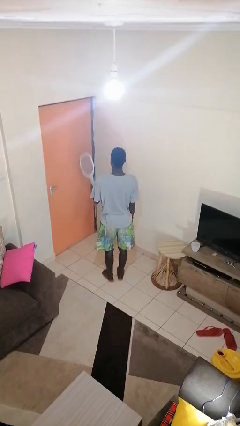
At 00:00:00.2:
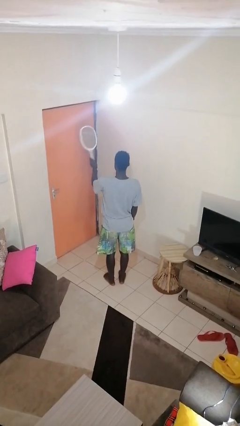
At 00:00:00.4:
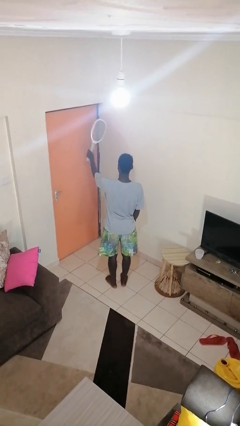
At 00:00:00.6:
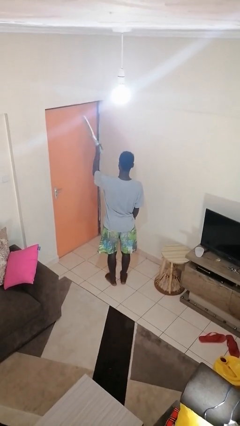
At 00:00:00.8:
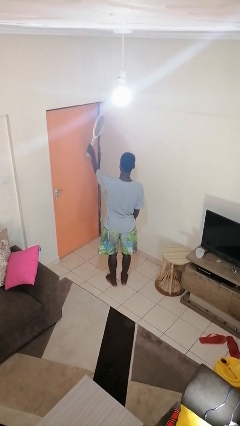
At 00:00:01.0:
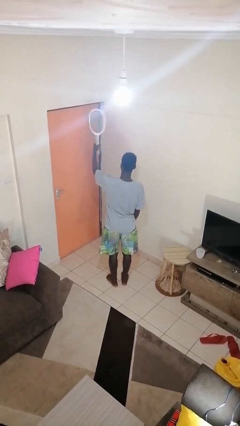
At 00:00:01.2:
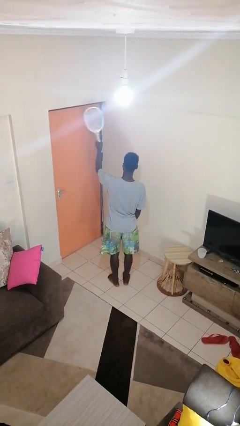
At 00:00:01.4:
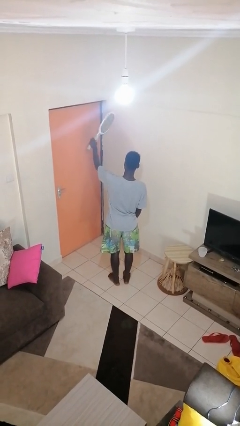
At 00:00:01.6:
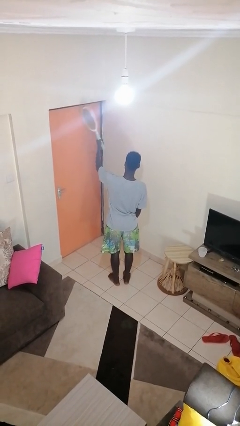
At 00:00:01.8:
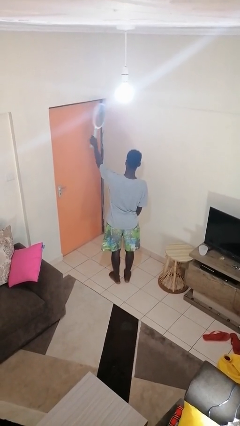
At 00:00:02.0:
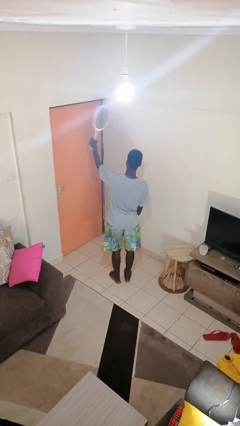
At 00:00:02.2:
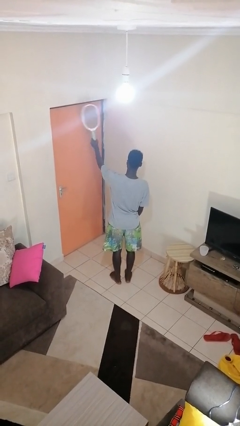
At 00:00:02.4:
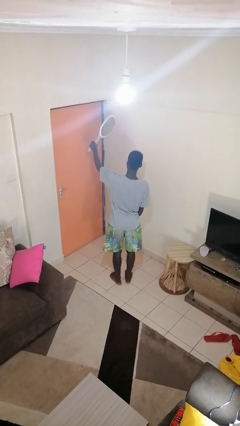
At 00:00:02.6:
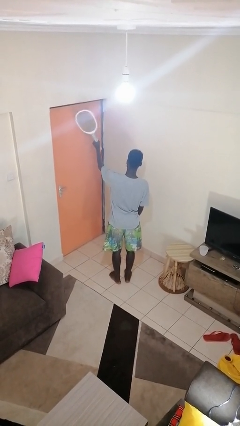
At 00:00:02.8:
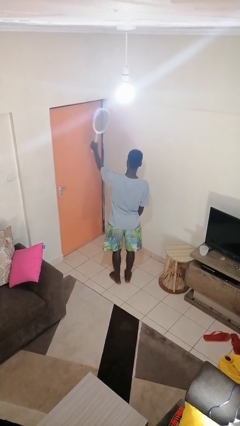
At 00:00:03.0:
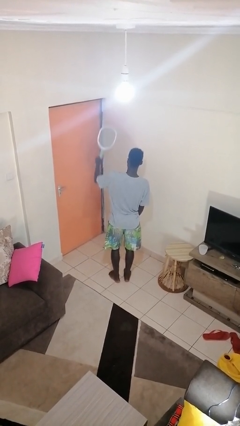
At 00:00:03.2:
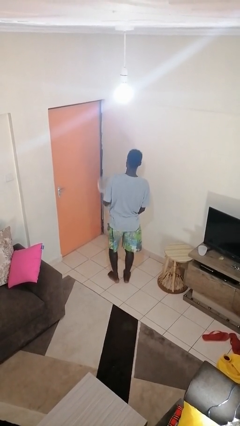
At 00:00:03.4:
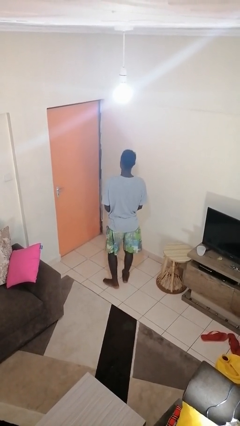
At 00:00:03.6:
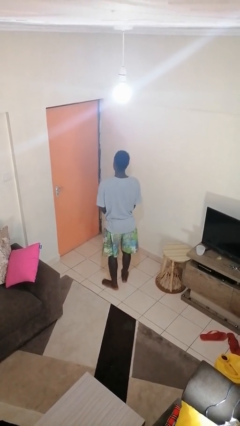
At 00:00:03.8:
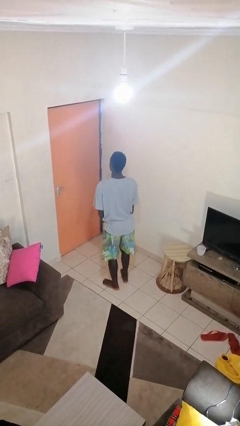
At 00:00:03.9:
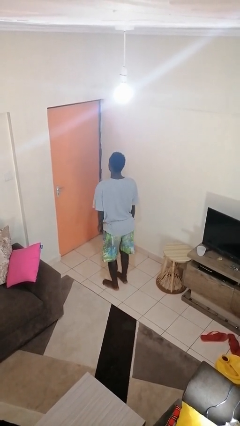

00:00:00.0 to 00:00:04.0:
person holds object above head

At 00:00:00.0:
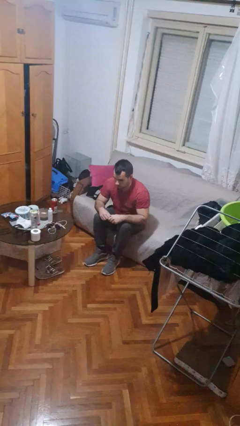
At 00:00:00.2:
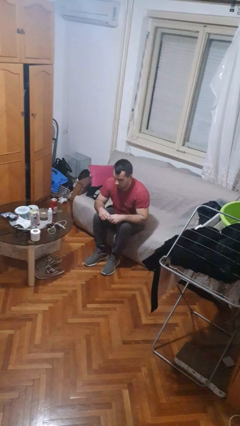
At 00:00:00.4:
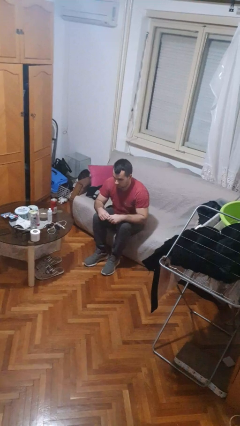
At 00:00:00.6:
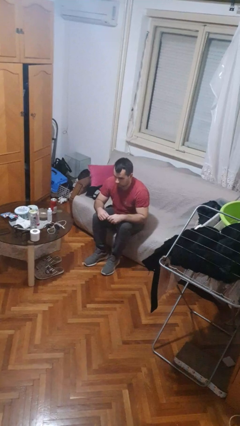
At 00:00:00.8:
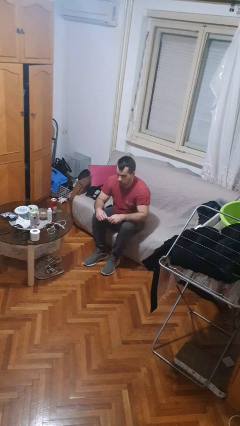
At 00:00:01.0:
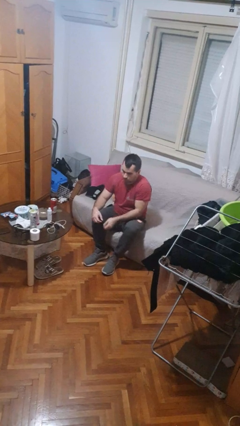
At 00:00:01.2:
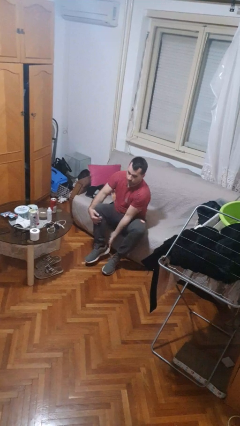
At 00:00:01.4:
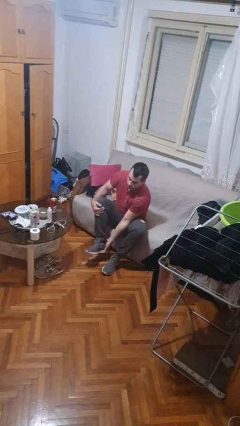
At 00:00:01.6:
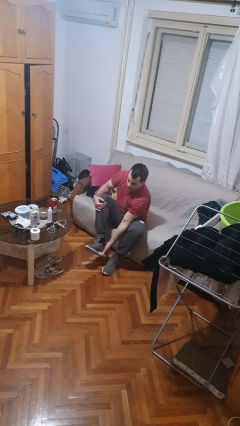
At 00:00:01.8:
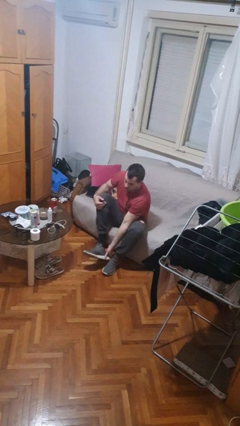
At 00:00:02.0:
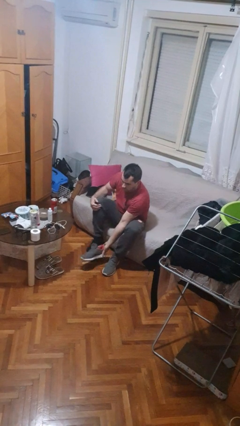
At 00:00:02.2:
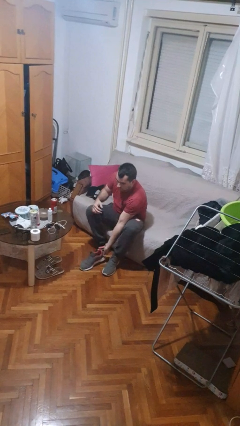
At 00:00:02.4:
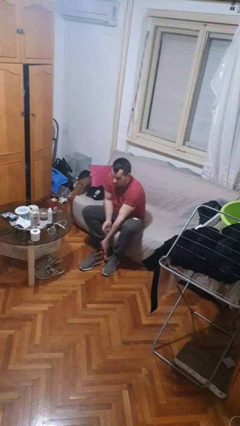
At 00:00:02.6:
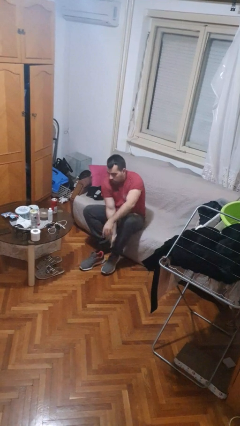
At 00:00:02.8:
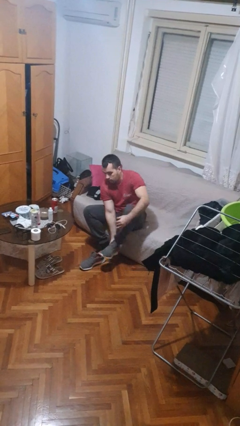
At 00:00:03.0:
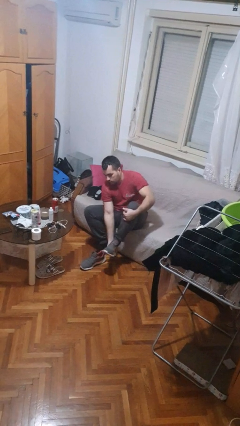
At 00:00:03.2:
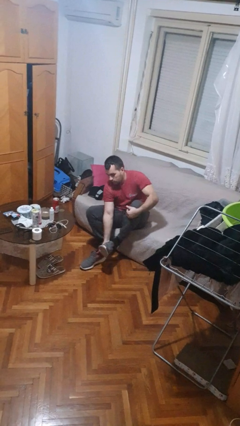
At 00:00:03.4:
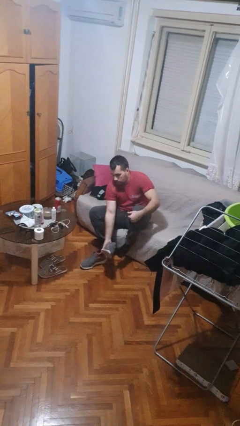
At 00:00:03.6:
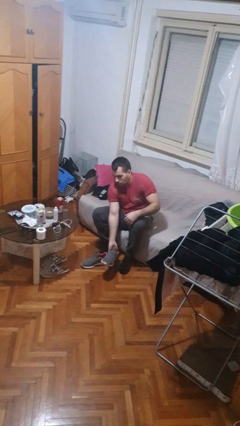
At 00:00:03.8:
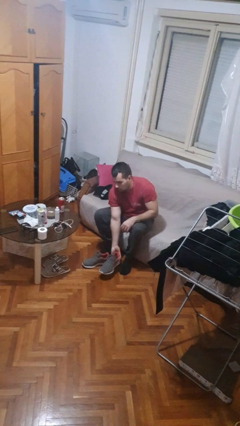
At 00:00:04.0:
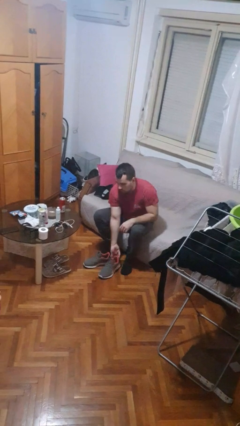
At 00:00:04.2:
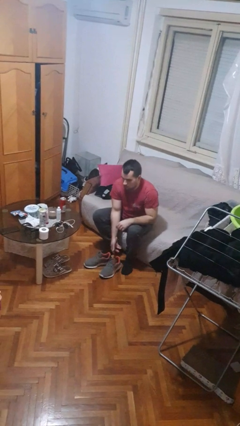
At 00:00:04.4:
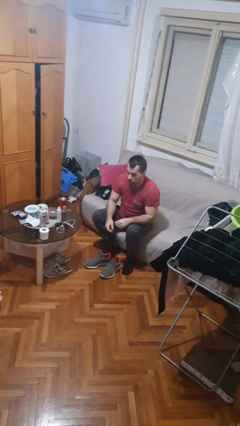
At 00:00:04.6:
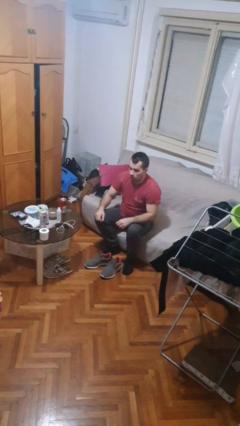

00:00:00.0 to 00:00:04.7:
person takes off shoes

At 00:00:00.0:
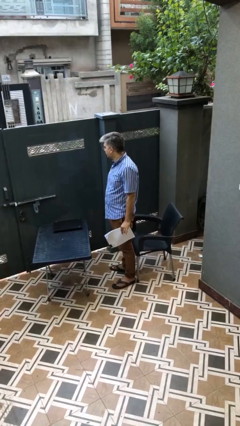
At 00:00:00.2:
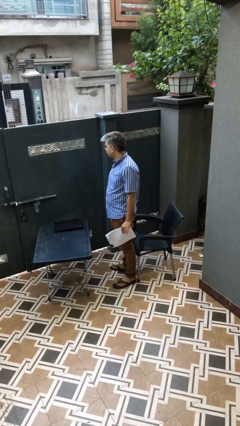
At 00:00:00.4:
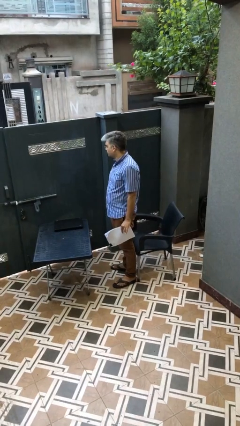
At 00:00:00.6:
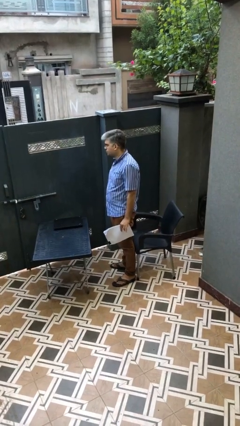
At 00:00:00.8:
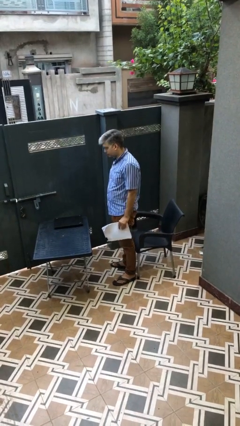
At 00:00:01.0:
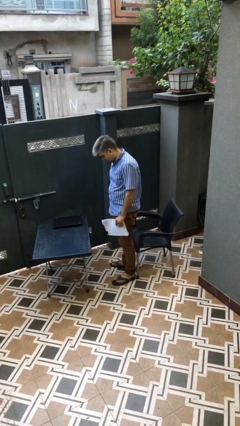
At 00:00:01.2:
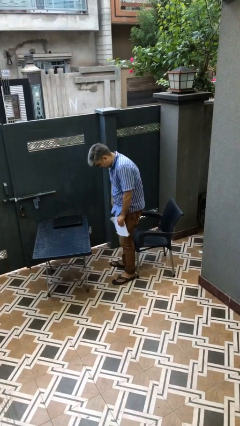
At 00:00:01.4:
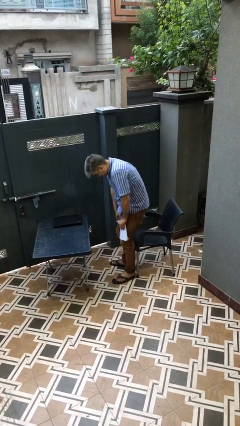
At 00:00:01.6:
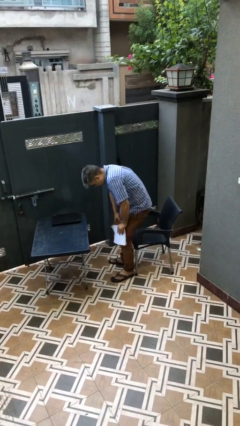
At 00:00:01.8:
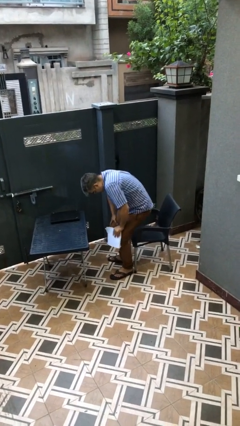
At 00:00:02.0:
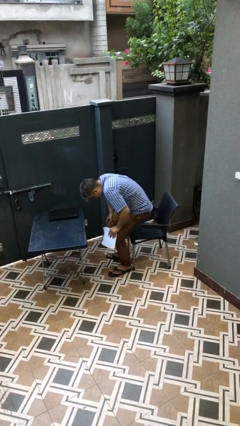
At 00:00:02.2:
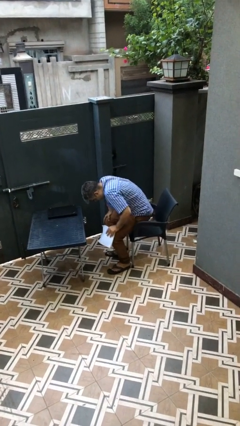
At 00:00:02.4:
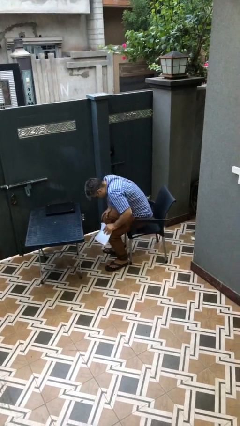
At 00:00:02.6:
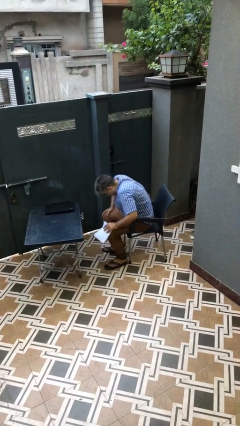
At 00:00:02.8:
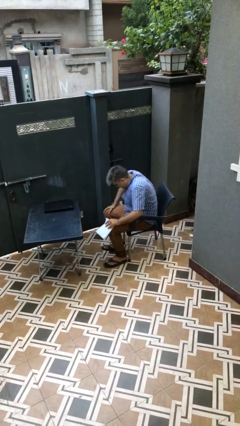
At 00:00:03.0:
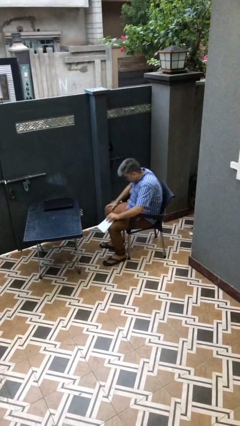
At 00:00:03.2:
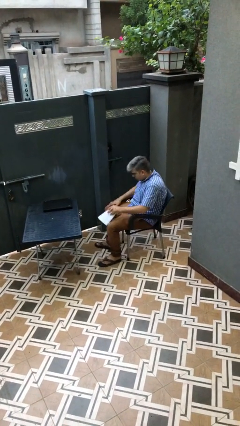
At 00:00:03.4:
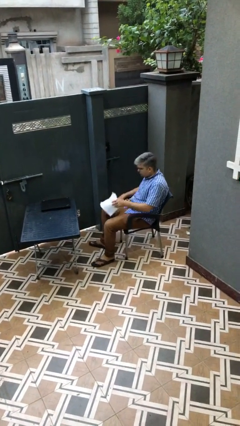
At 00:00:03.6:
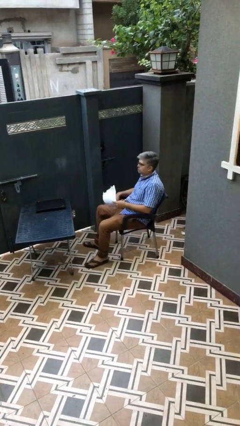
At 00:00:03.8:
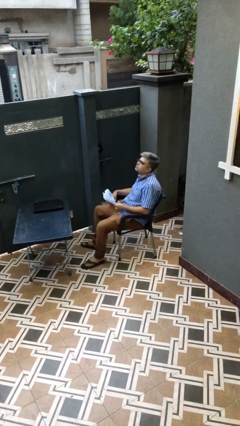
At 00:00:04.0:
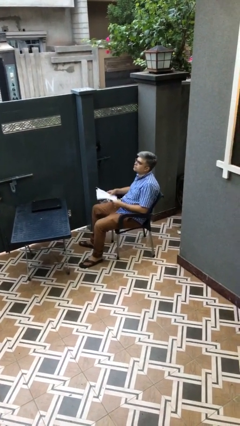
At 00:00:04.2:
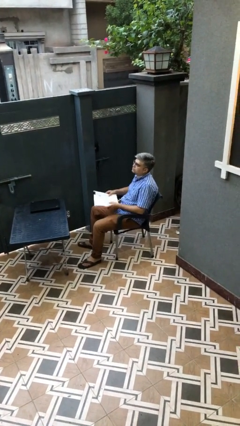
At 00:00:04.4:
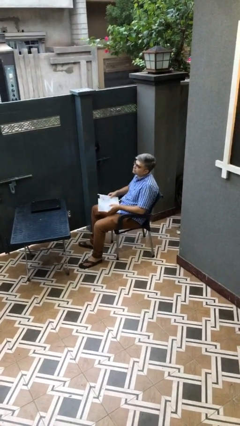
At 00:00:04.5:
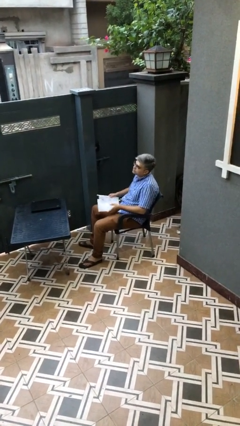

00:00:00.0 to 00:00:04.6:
person sits down

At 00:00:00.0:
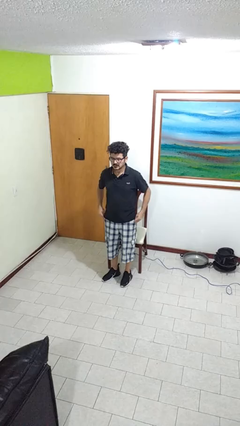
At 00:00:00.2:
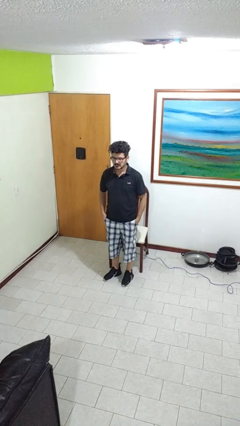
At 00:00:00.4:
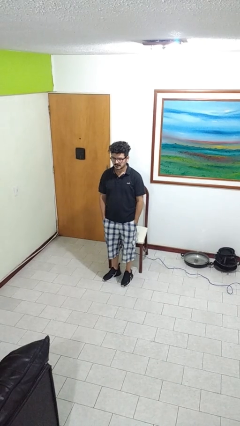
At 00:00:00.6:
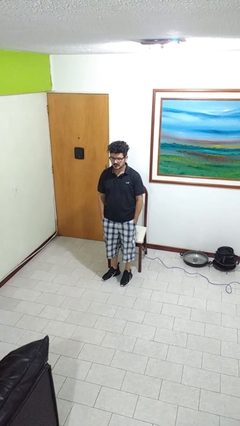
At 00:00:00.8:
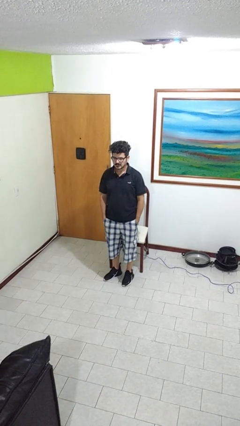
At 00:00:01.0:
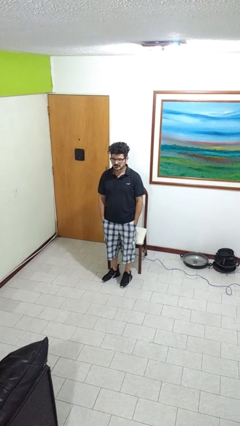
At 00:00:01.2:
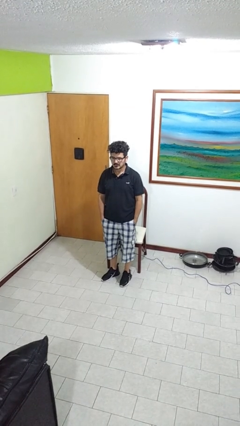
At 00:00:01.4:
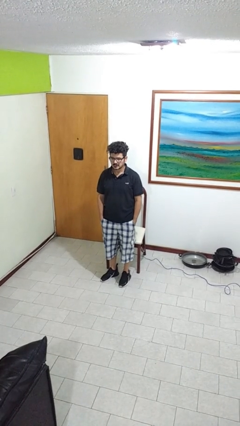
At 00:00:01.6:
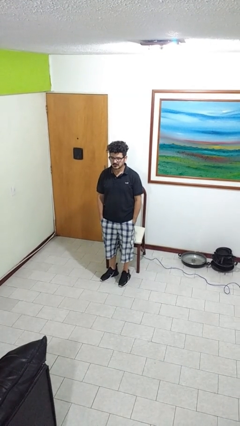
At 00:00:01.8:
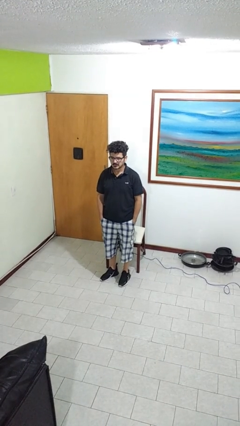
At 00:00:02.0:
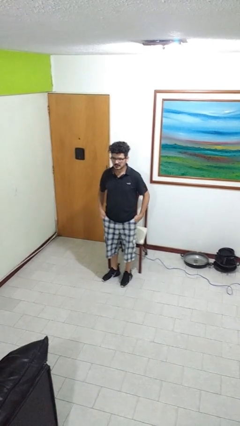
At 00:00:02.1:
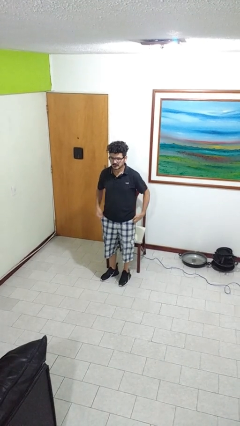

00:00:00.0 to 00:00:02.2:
person puts hands in back pockets

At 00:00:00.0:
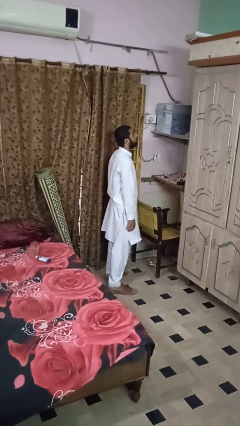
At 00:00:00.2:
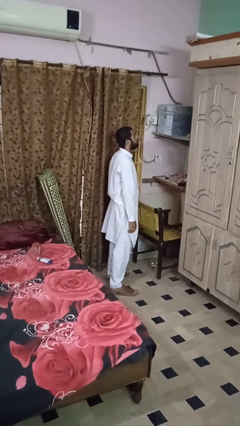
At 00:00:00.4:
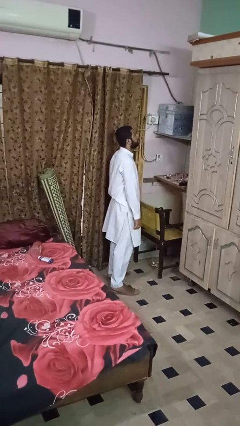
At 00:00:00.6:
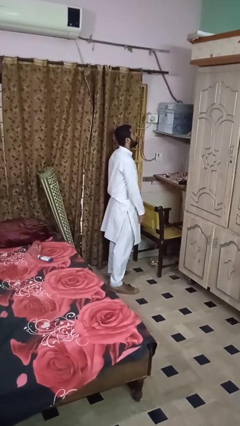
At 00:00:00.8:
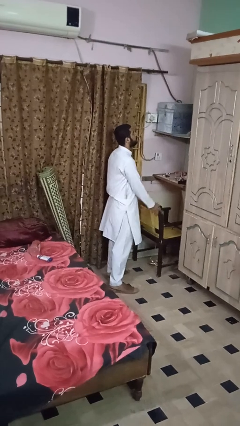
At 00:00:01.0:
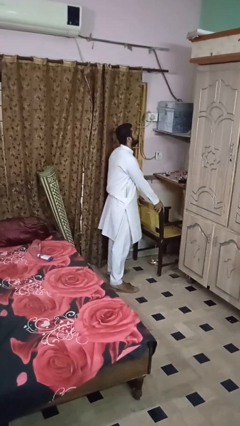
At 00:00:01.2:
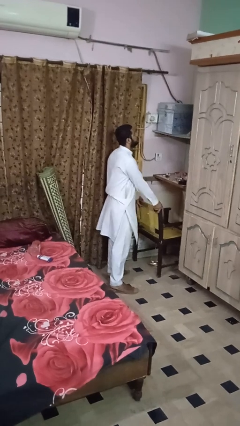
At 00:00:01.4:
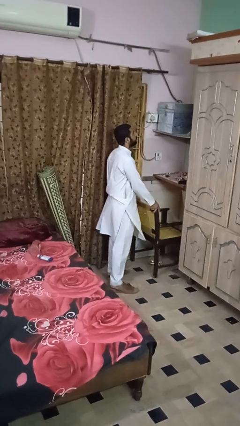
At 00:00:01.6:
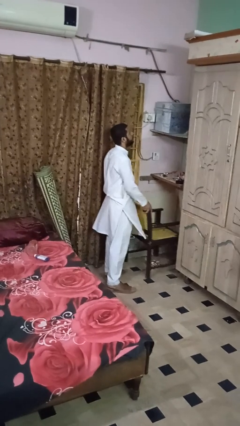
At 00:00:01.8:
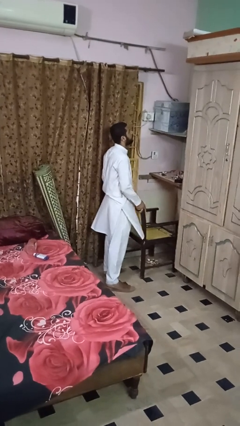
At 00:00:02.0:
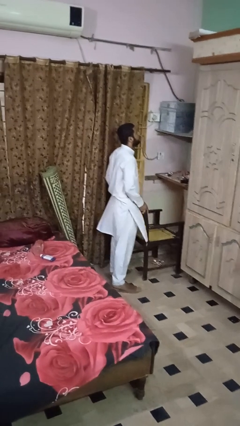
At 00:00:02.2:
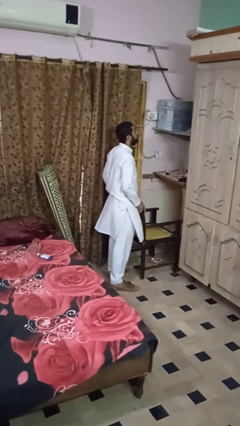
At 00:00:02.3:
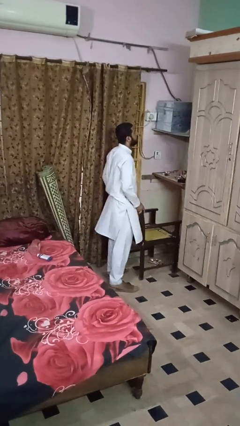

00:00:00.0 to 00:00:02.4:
person pulls out chair
